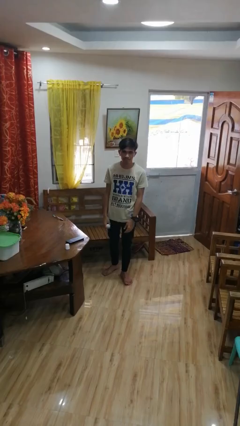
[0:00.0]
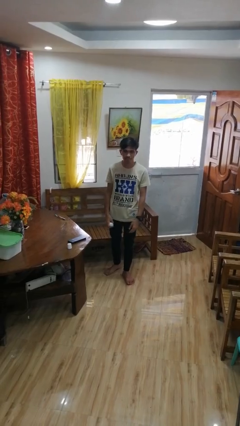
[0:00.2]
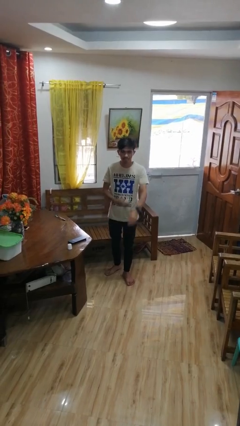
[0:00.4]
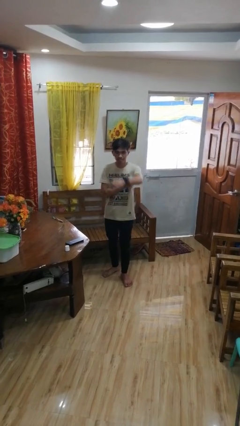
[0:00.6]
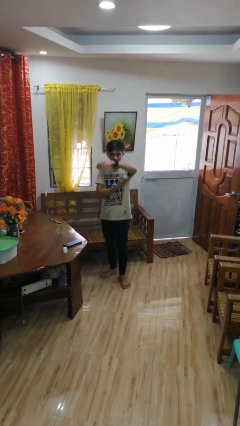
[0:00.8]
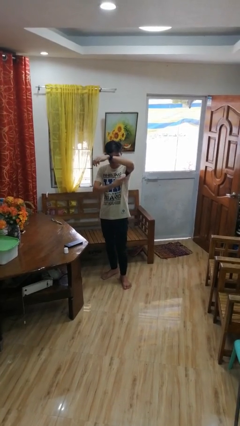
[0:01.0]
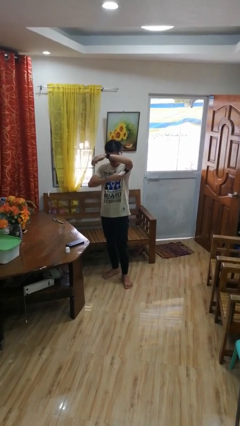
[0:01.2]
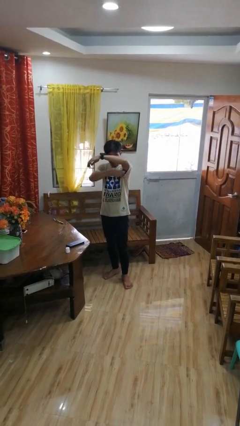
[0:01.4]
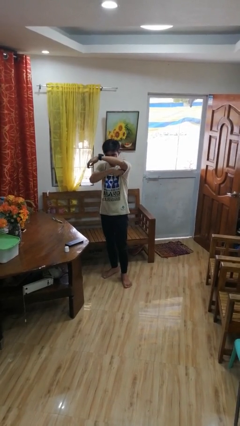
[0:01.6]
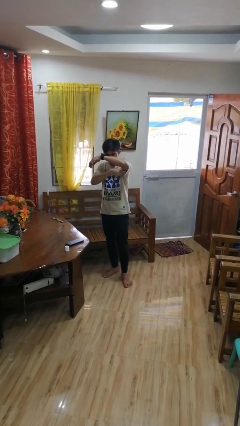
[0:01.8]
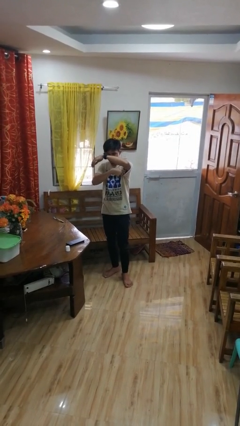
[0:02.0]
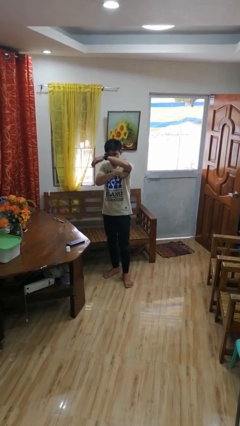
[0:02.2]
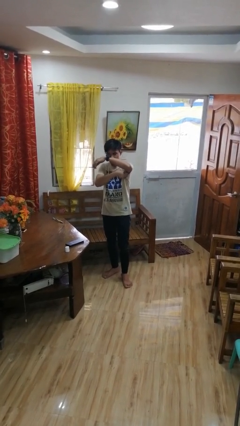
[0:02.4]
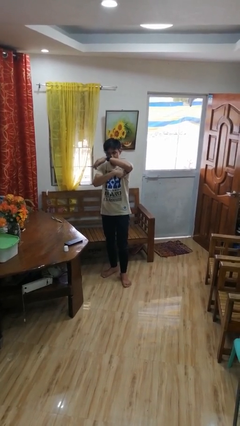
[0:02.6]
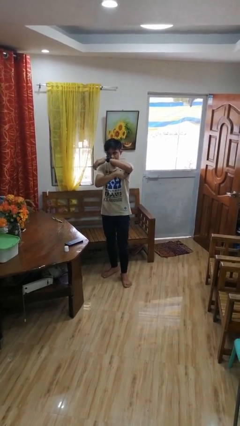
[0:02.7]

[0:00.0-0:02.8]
person applies deodorant

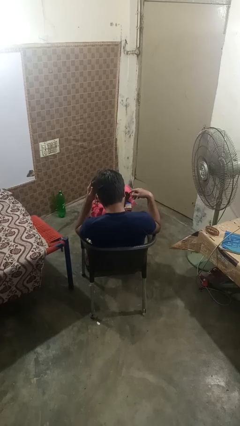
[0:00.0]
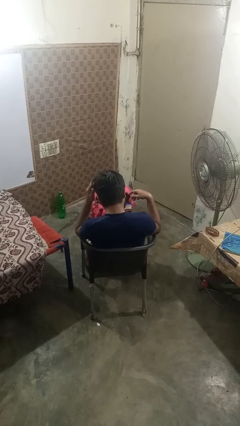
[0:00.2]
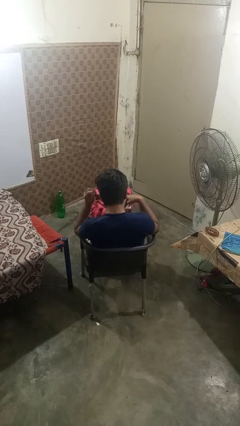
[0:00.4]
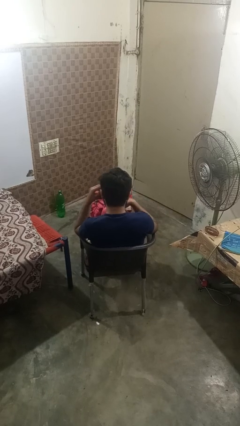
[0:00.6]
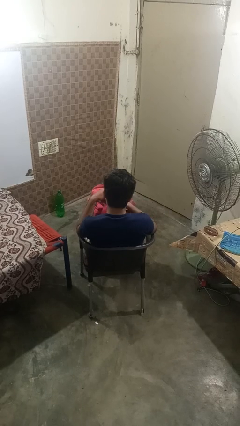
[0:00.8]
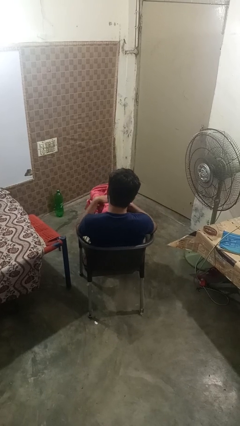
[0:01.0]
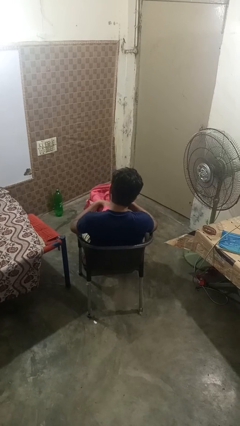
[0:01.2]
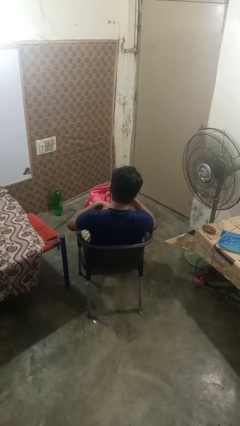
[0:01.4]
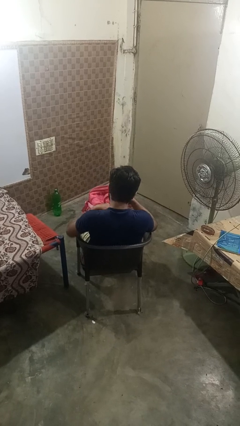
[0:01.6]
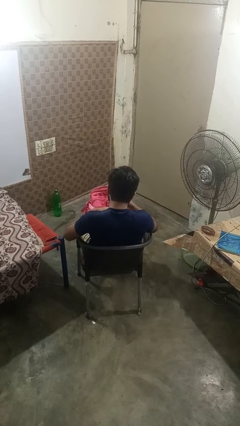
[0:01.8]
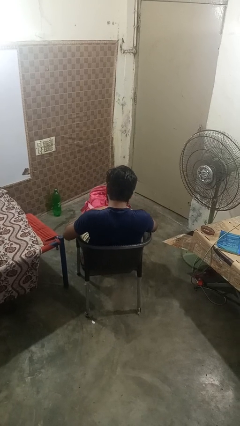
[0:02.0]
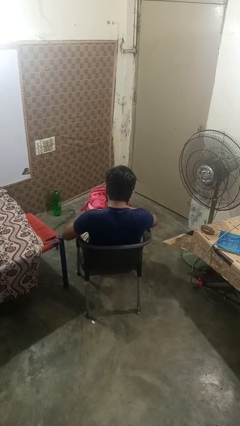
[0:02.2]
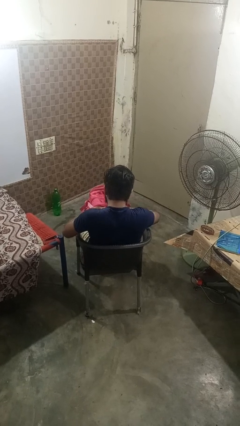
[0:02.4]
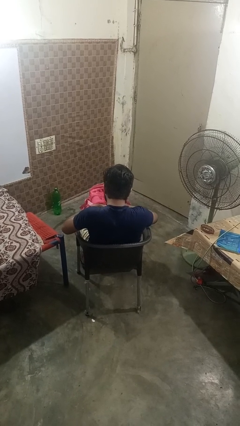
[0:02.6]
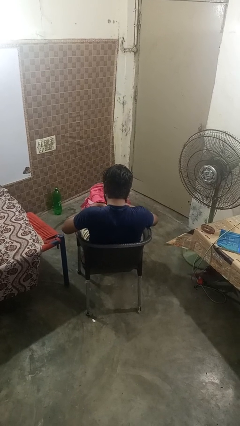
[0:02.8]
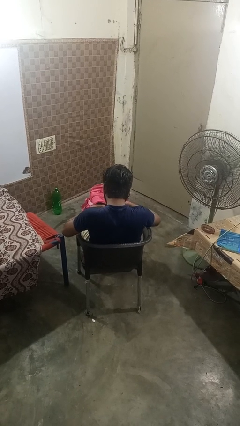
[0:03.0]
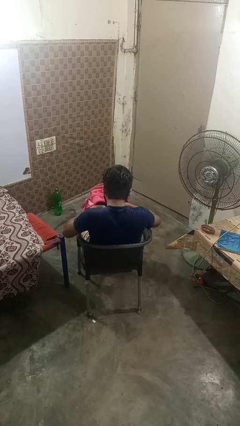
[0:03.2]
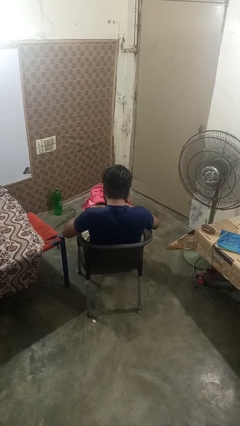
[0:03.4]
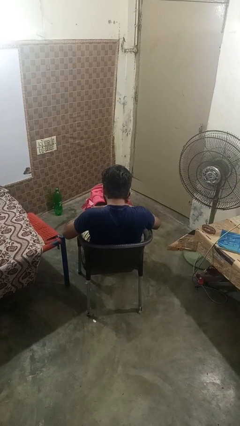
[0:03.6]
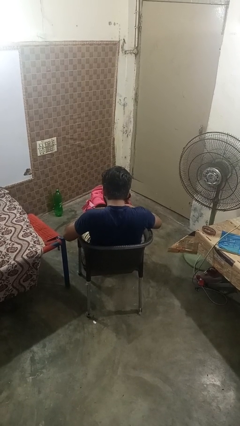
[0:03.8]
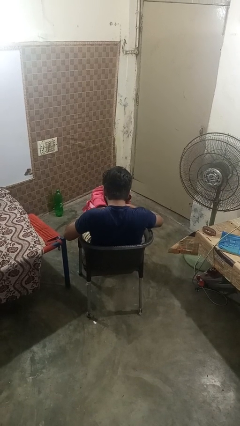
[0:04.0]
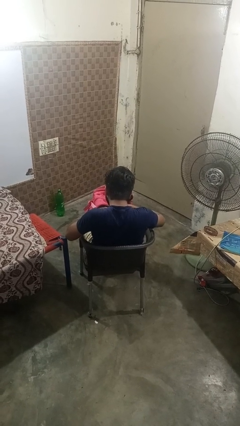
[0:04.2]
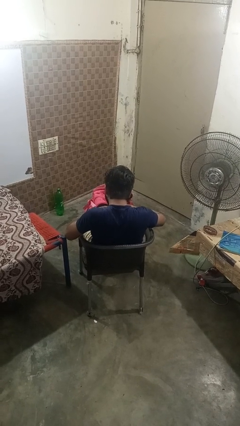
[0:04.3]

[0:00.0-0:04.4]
person searches in backpack

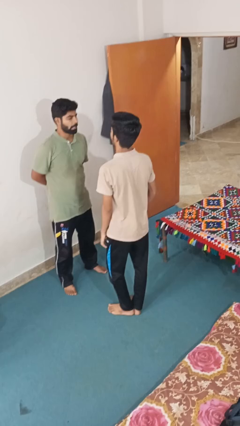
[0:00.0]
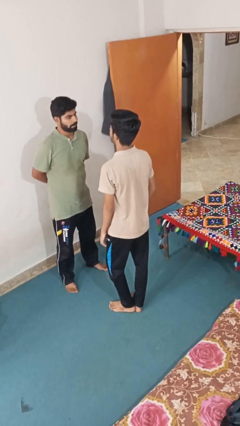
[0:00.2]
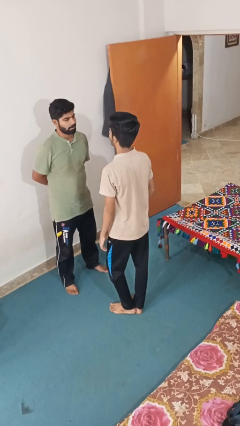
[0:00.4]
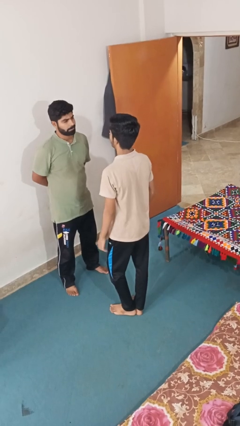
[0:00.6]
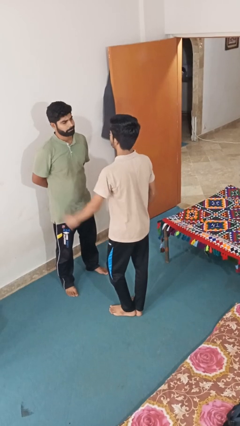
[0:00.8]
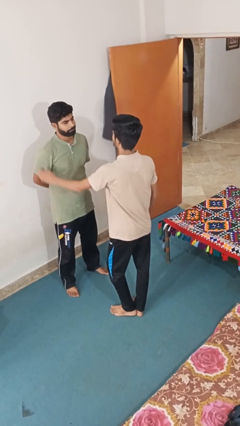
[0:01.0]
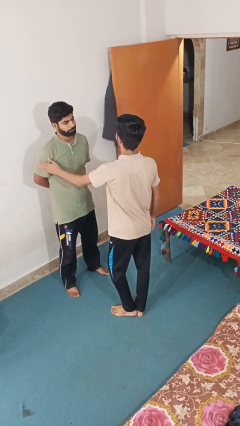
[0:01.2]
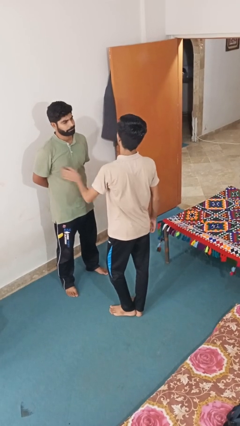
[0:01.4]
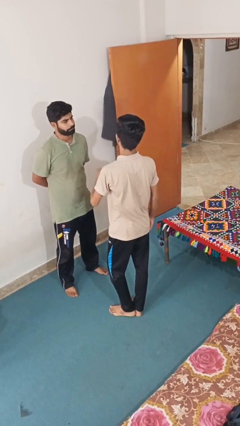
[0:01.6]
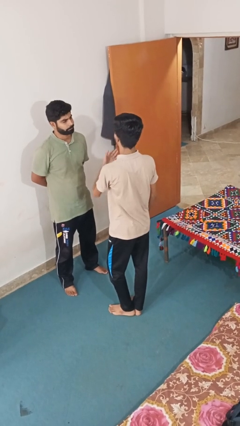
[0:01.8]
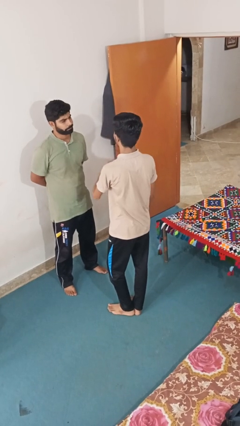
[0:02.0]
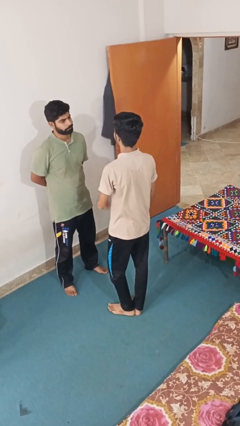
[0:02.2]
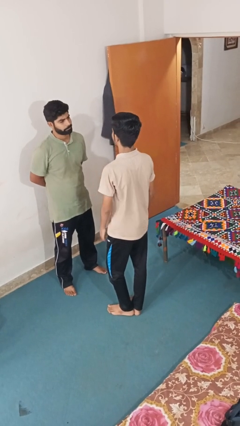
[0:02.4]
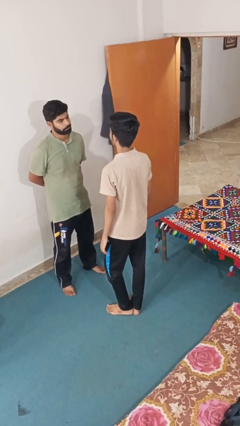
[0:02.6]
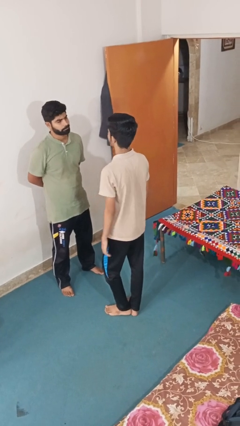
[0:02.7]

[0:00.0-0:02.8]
person shoves person

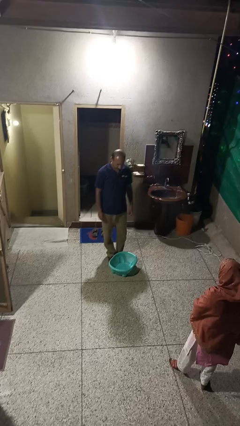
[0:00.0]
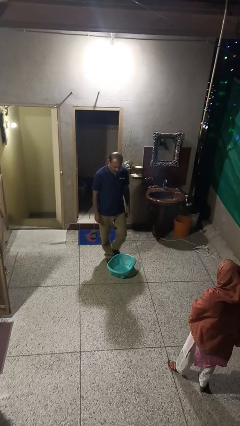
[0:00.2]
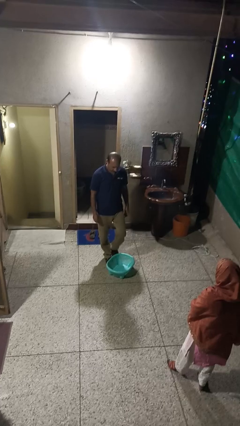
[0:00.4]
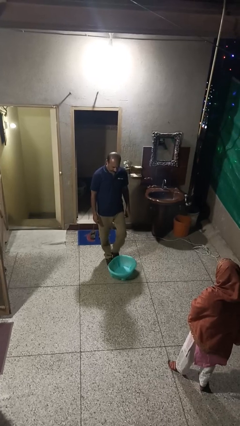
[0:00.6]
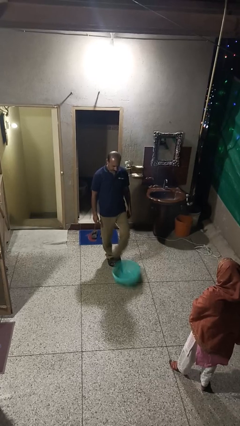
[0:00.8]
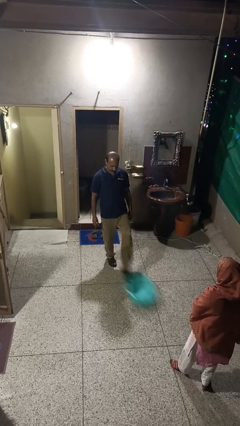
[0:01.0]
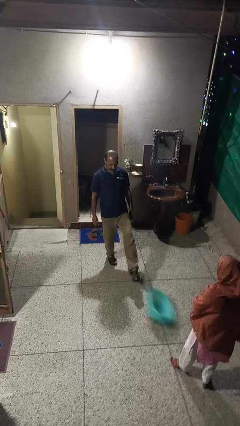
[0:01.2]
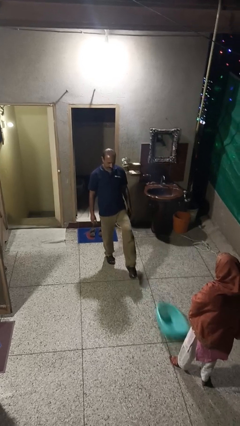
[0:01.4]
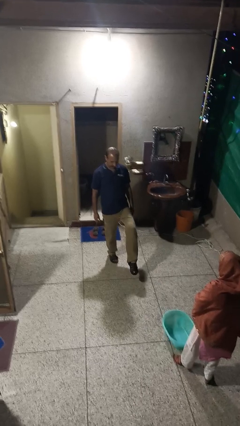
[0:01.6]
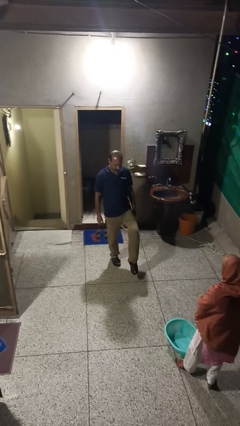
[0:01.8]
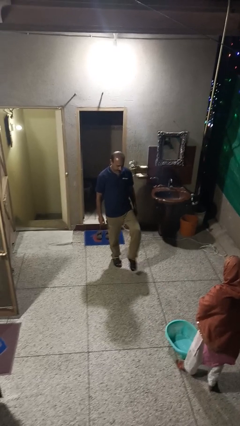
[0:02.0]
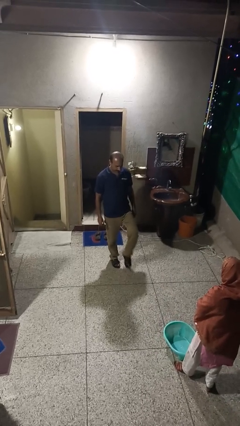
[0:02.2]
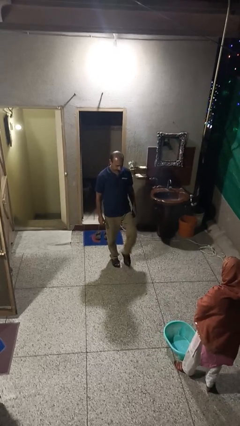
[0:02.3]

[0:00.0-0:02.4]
person kicks object to person

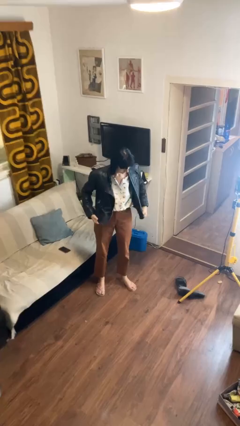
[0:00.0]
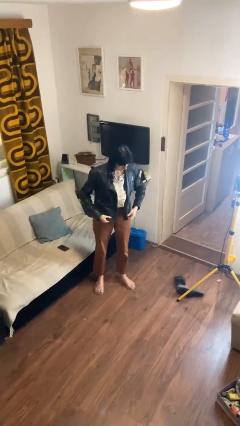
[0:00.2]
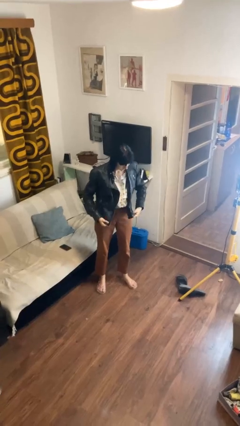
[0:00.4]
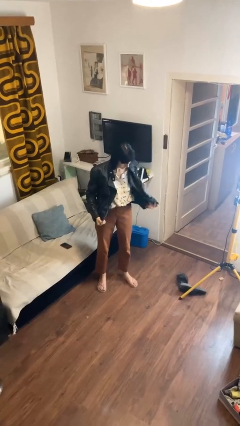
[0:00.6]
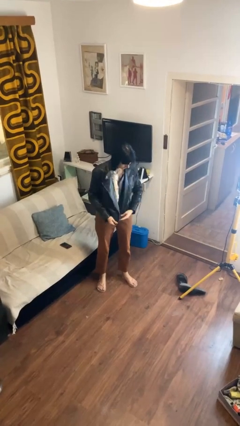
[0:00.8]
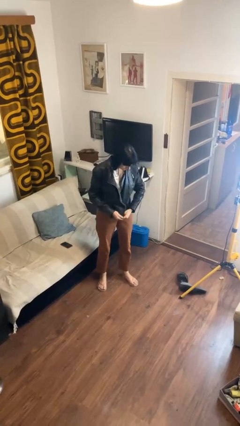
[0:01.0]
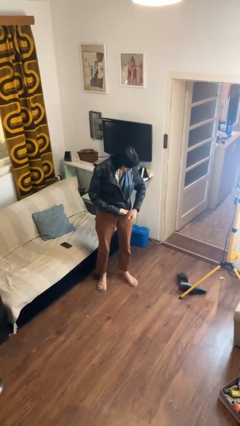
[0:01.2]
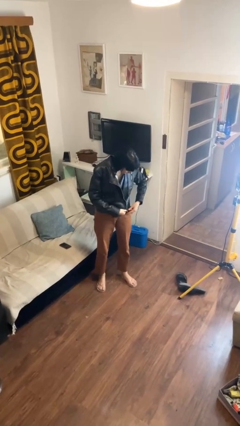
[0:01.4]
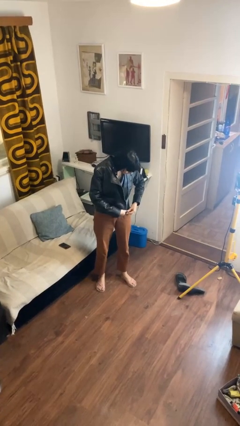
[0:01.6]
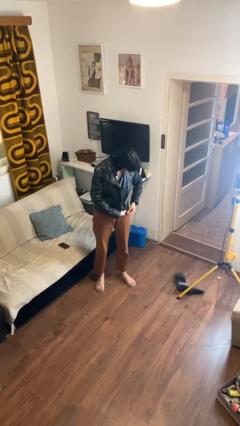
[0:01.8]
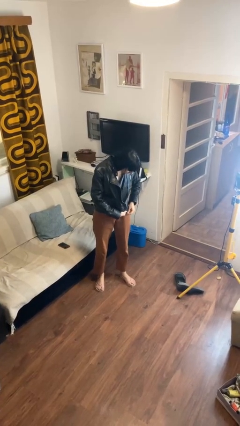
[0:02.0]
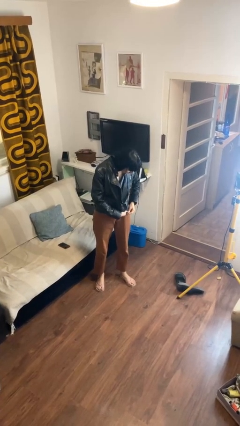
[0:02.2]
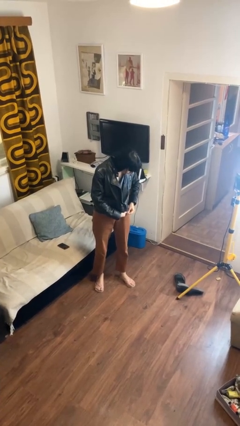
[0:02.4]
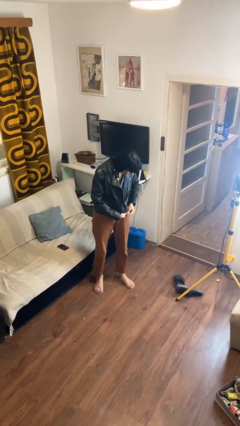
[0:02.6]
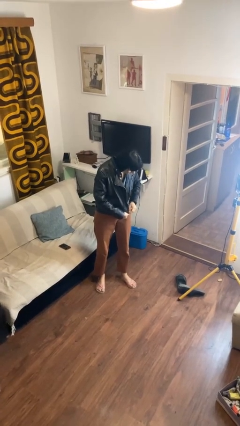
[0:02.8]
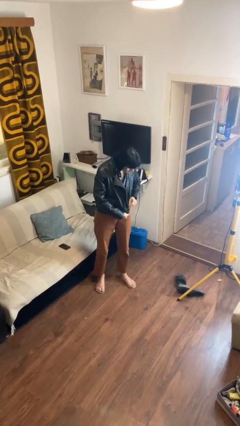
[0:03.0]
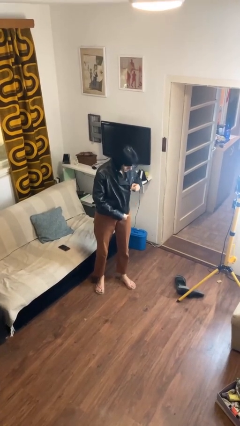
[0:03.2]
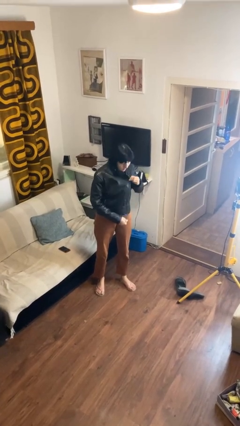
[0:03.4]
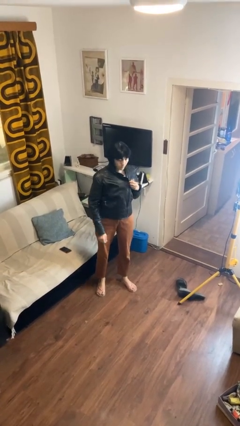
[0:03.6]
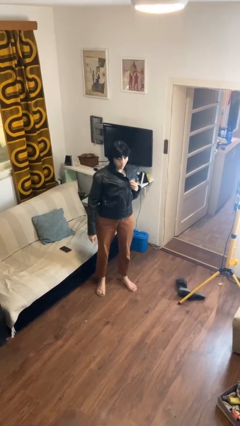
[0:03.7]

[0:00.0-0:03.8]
person zips up jacket

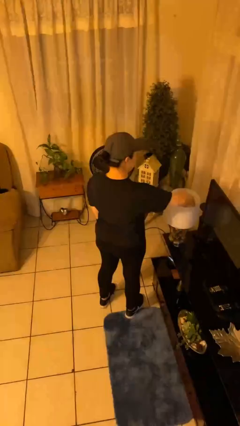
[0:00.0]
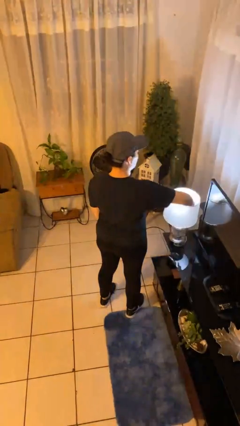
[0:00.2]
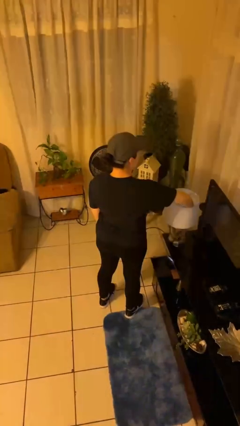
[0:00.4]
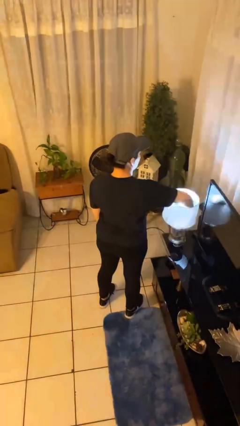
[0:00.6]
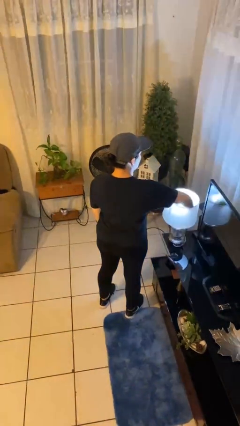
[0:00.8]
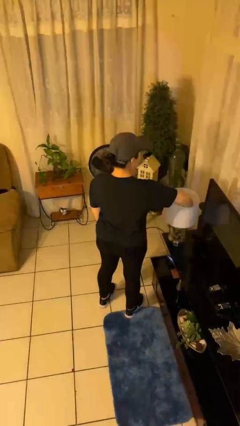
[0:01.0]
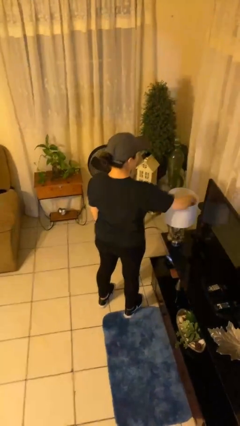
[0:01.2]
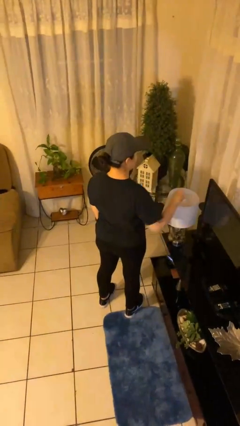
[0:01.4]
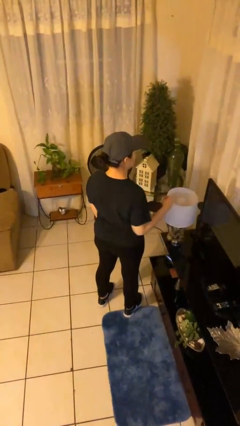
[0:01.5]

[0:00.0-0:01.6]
person turns off lamp
